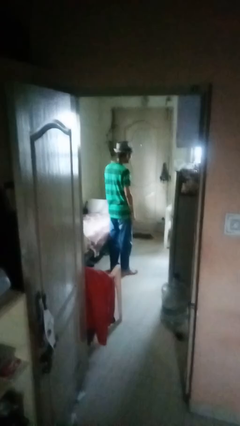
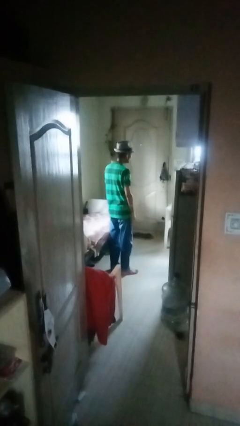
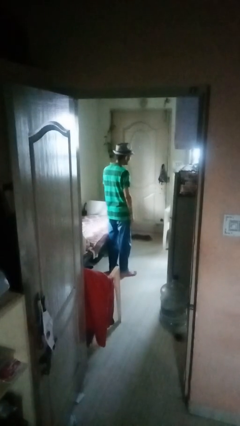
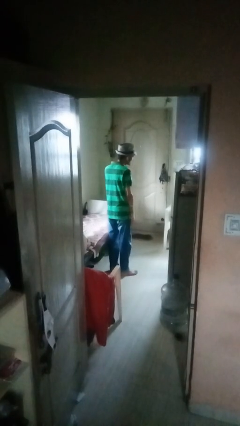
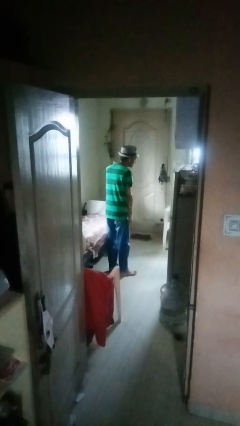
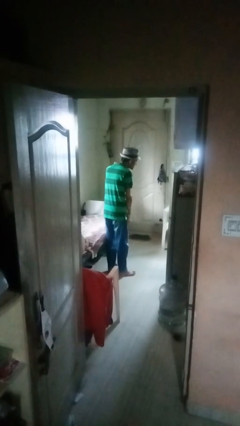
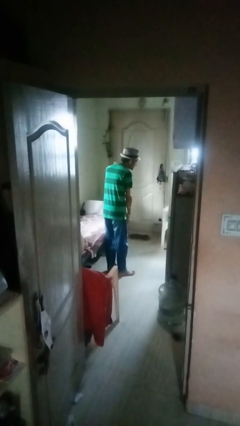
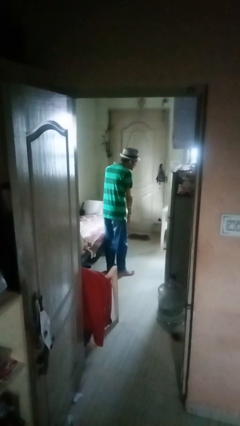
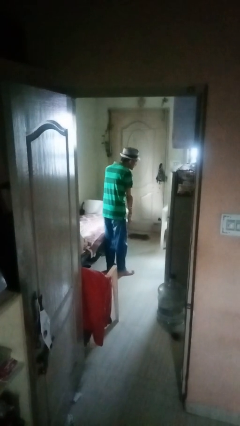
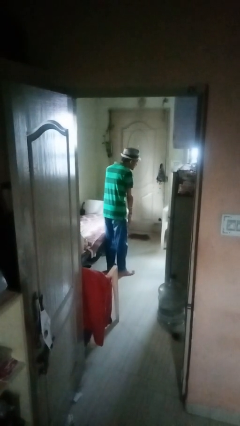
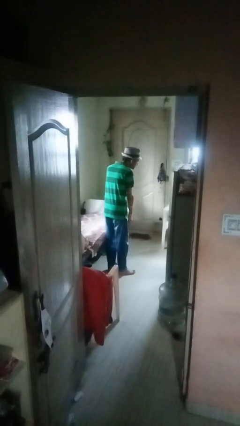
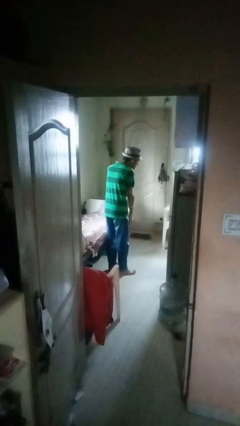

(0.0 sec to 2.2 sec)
person gestures listen closely

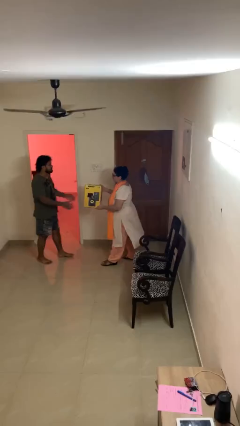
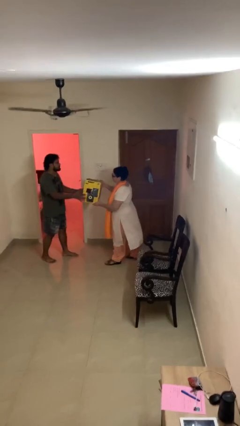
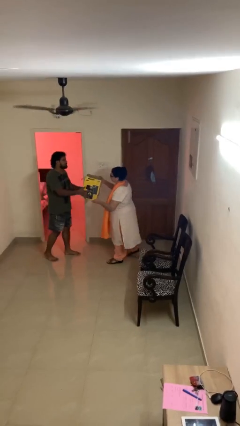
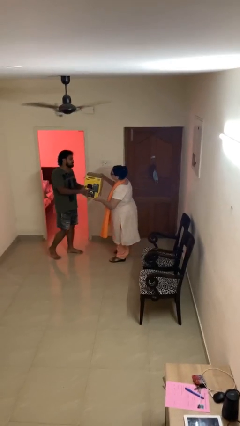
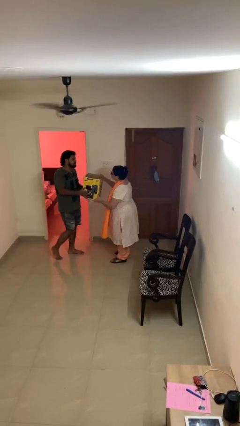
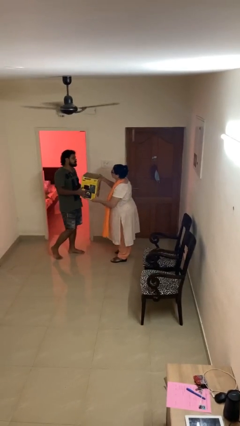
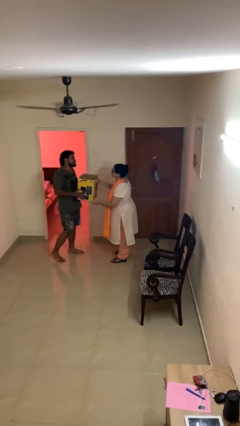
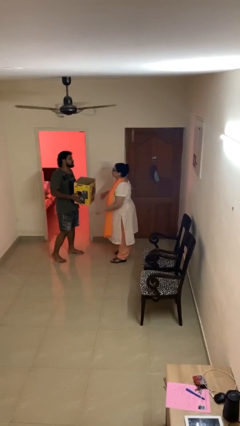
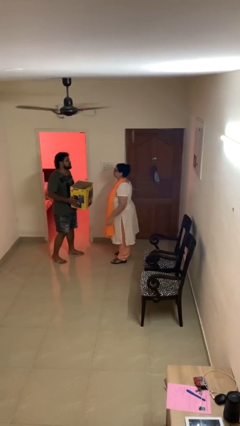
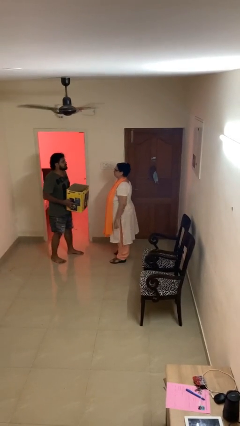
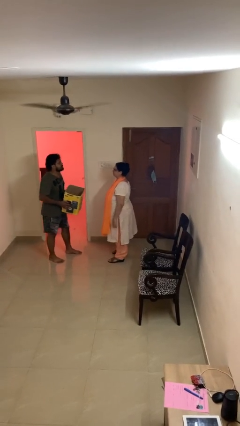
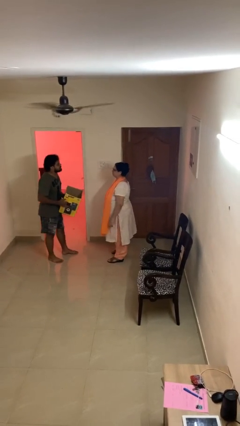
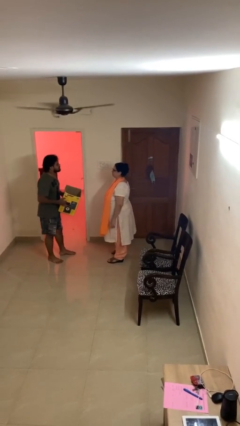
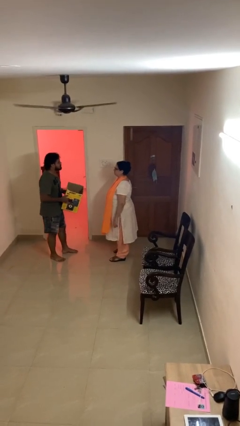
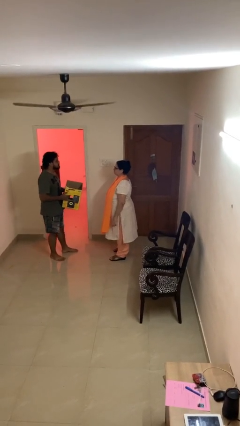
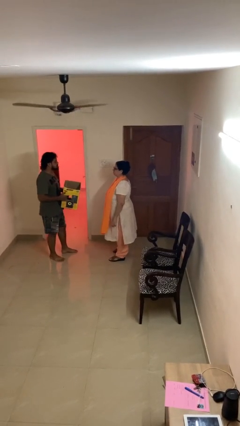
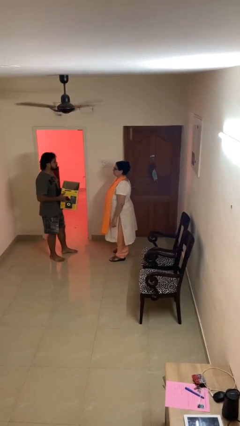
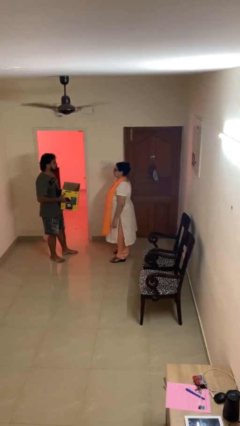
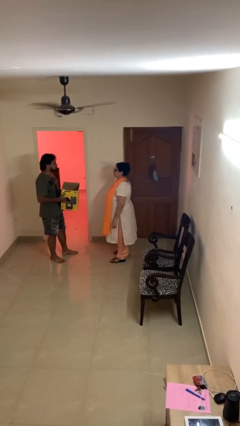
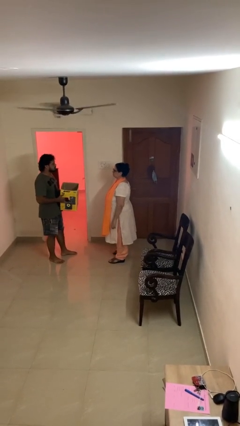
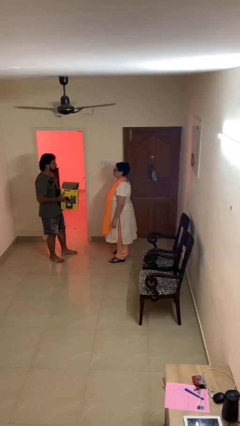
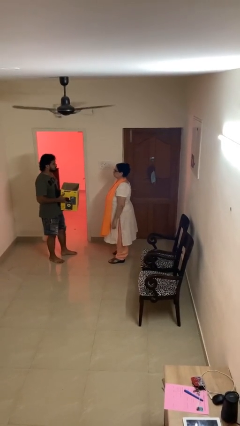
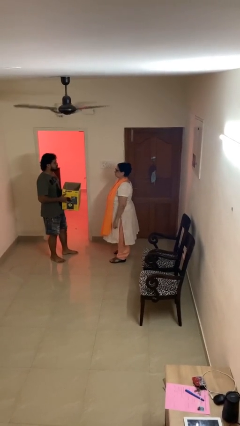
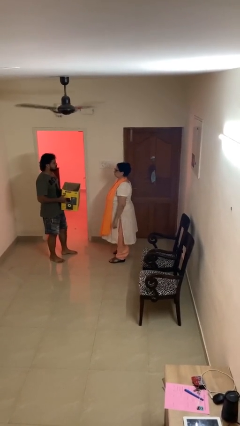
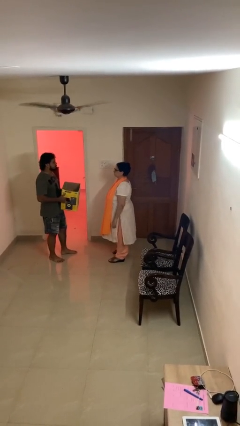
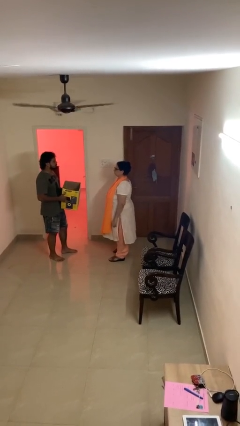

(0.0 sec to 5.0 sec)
person transfers object to person

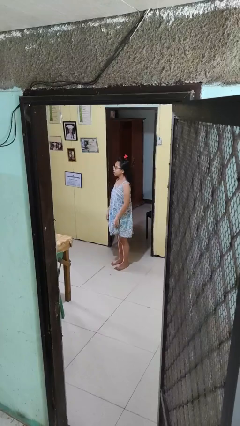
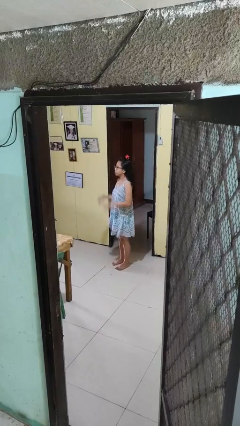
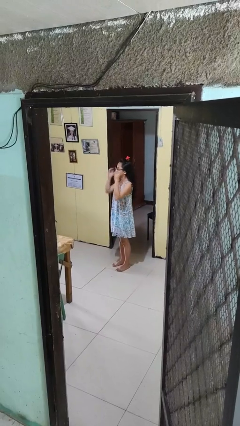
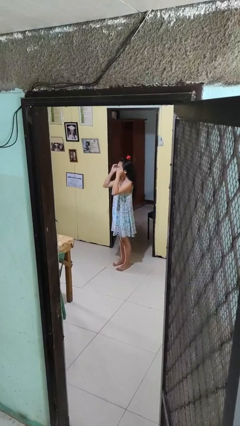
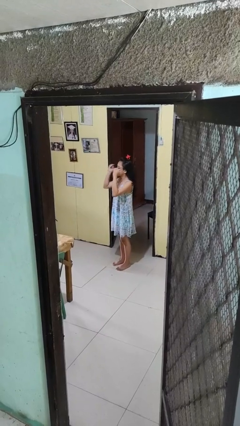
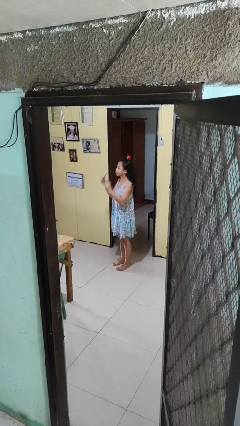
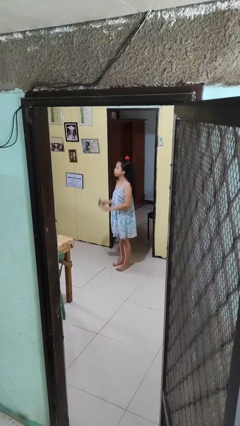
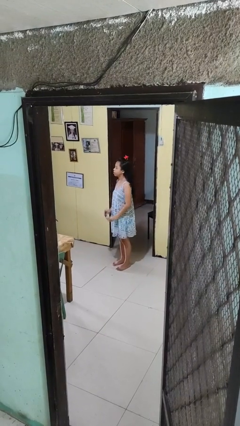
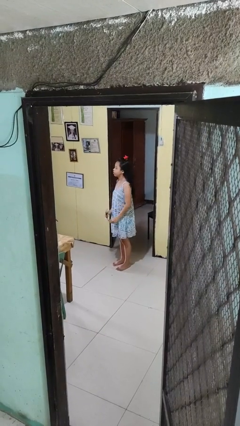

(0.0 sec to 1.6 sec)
person takes off glasses

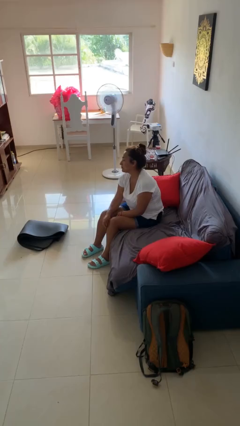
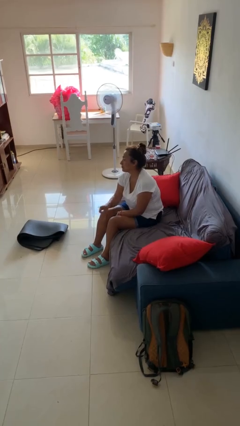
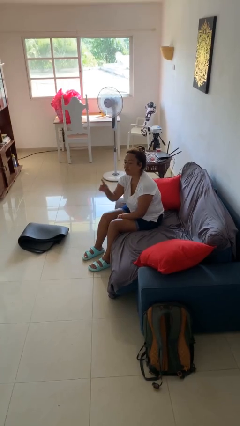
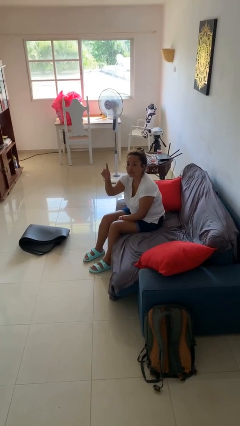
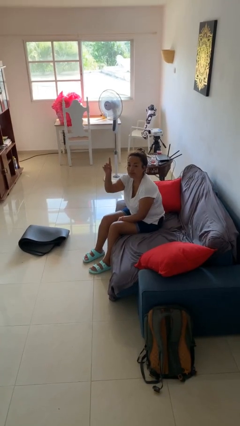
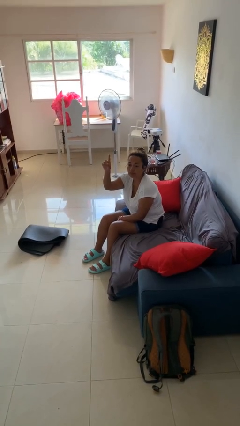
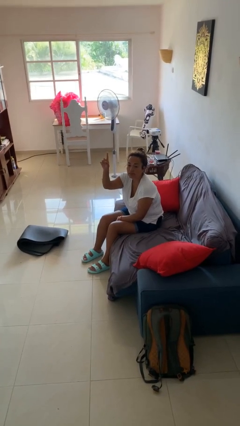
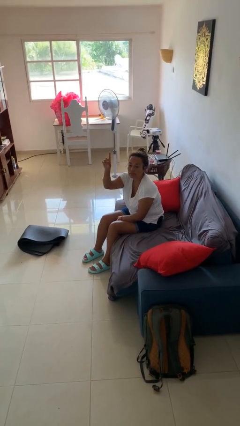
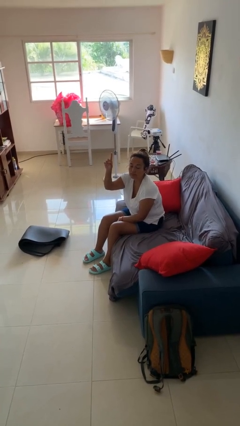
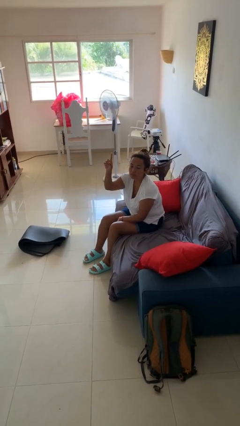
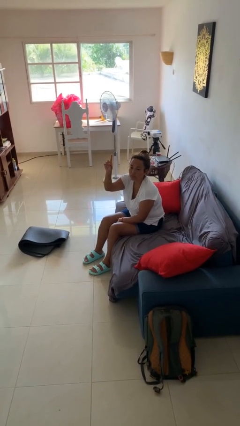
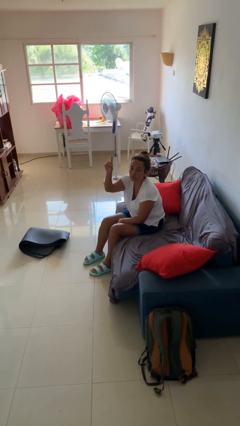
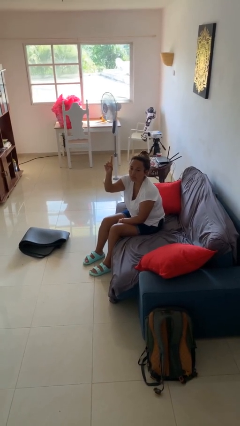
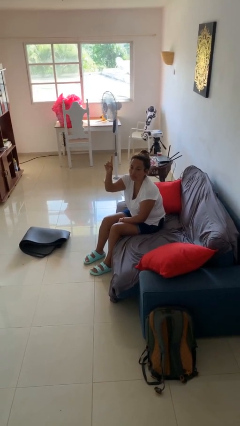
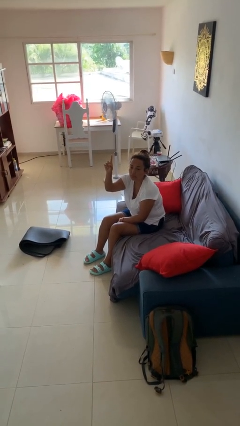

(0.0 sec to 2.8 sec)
person gestures raise hand

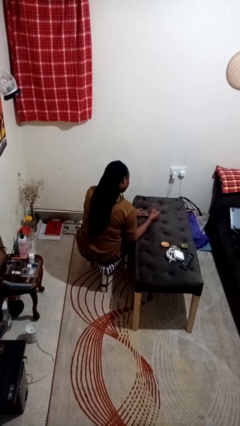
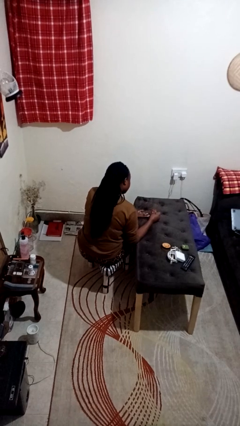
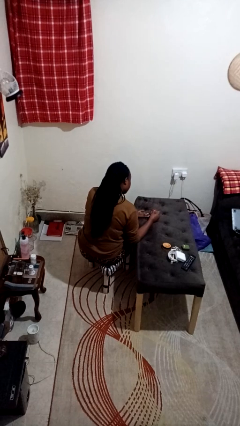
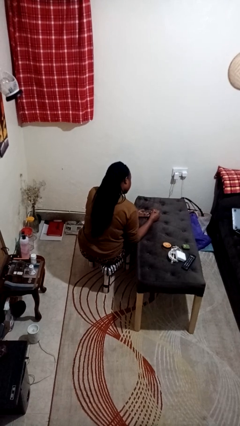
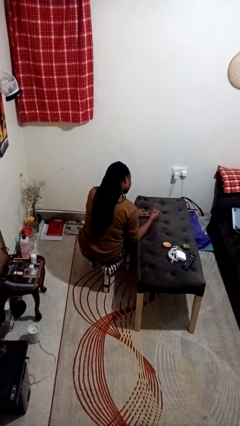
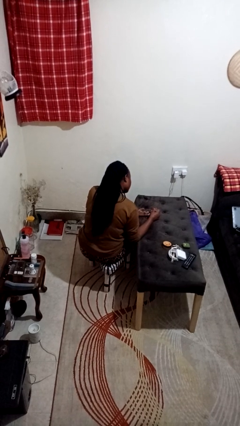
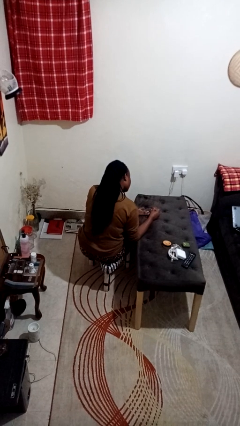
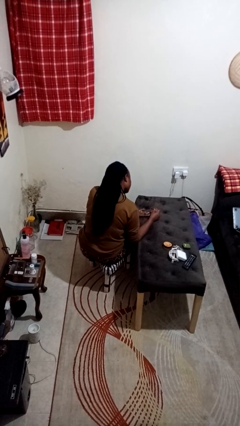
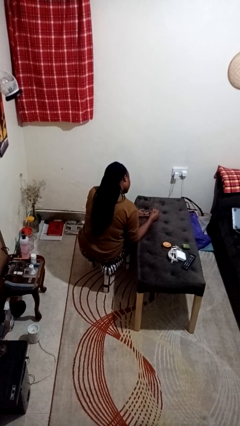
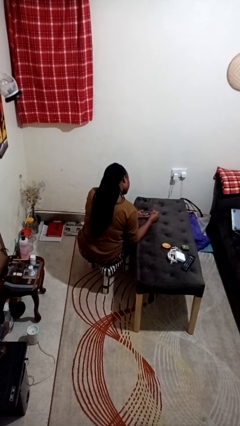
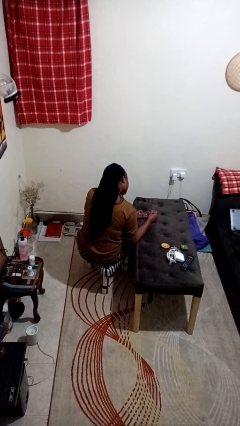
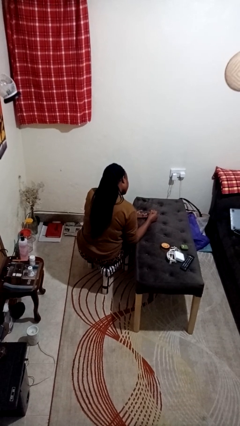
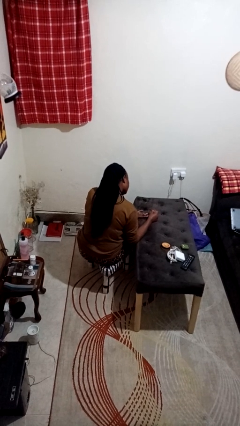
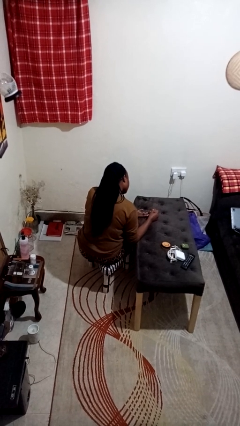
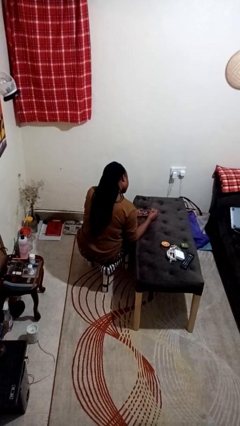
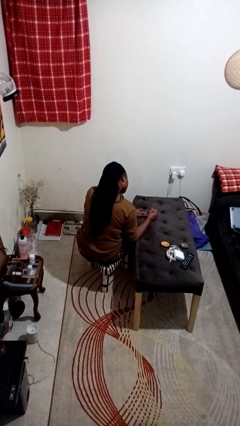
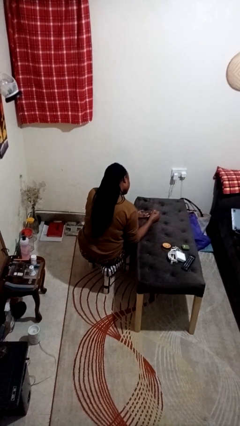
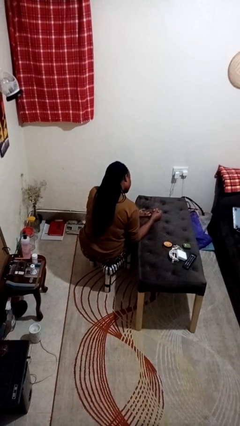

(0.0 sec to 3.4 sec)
person paints fingernails

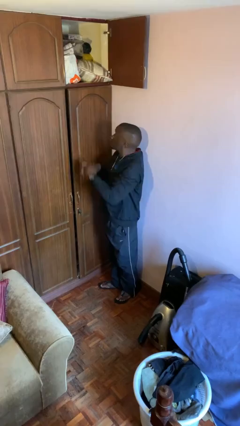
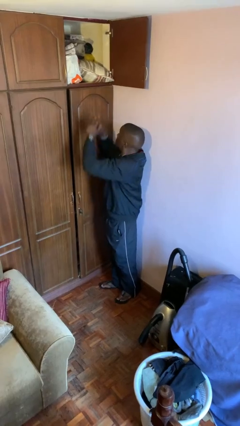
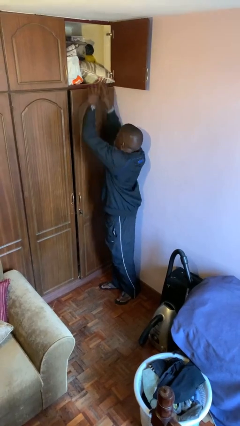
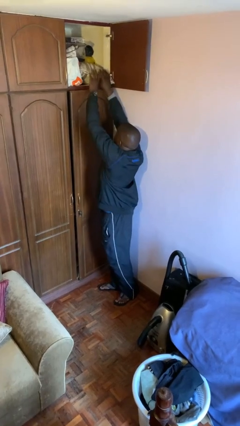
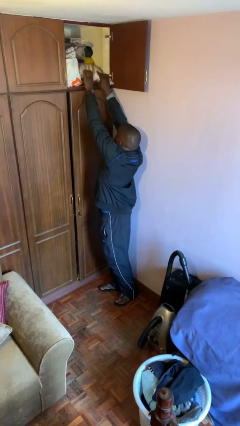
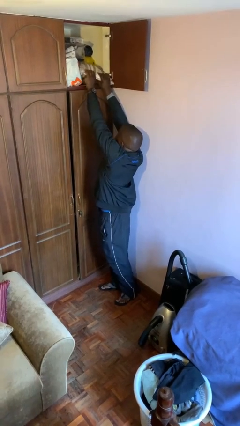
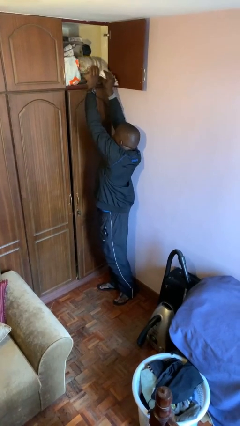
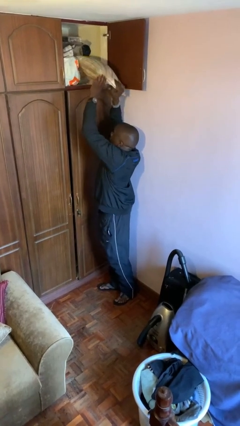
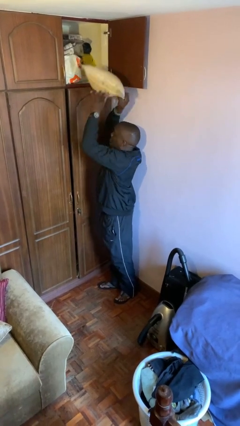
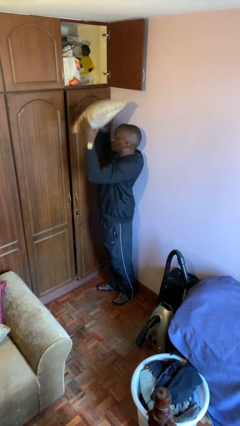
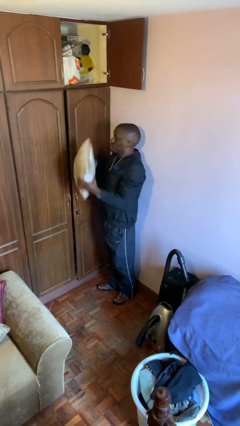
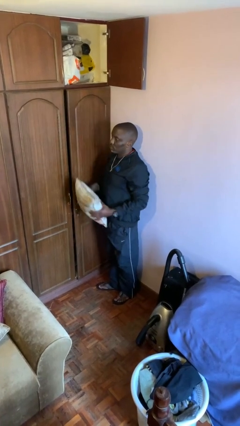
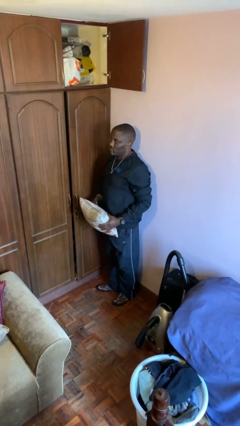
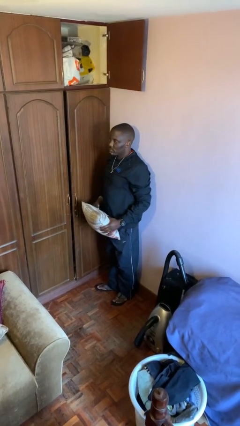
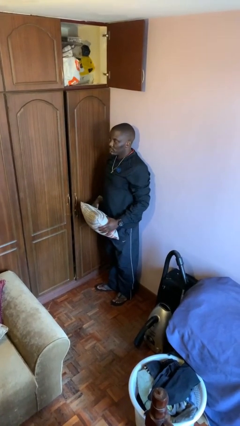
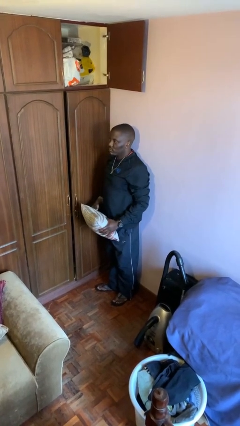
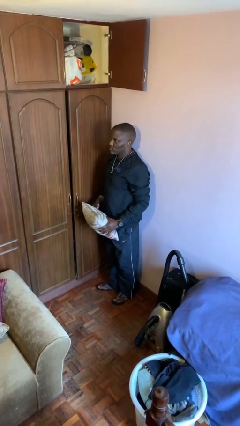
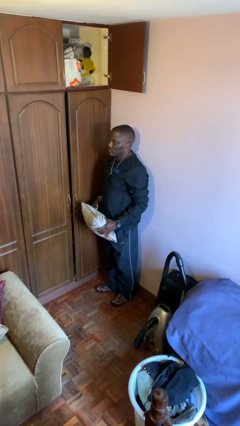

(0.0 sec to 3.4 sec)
person picks up object from shelf
